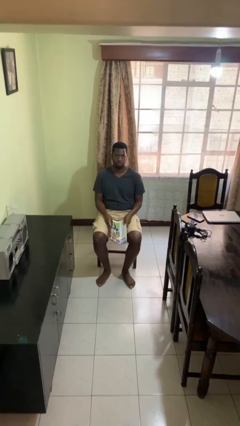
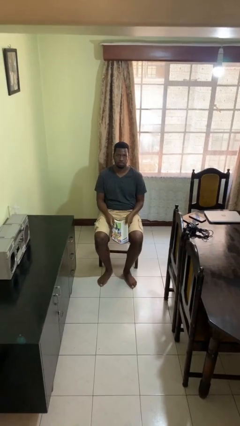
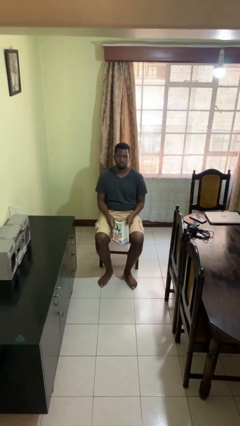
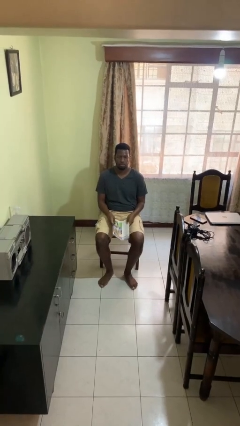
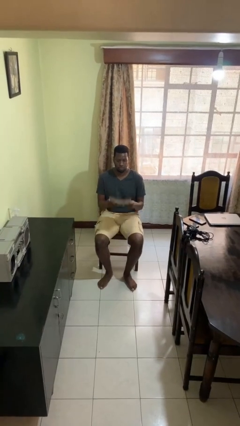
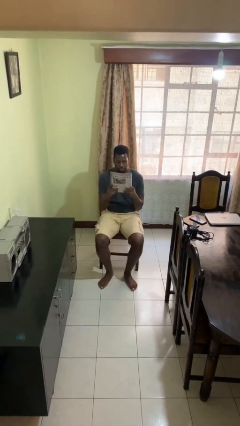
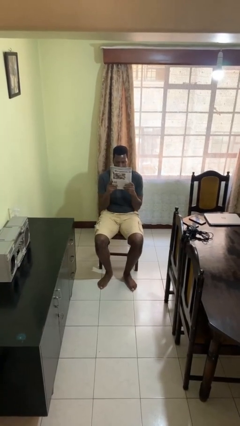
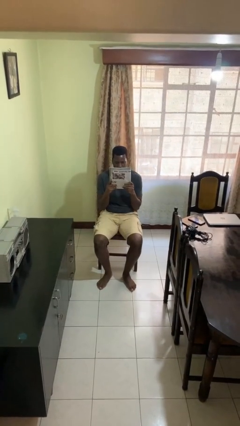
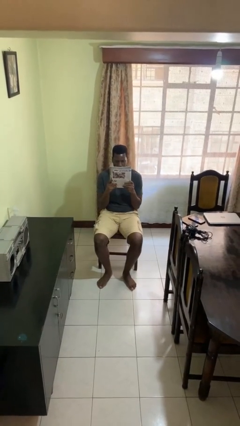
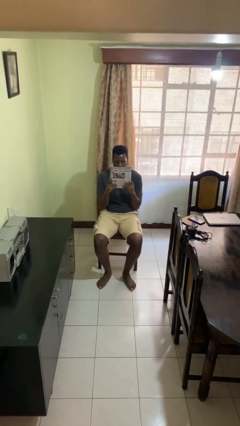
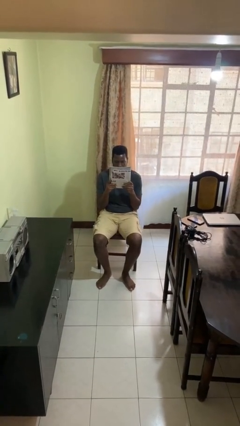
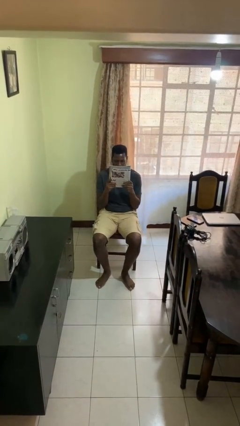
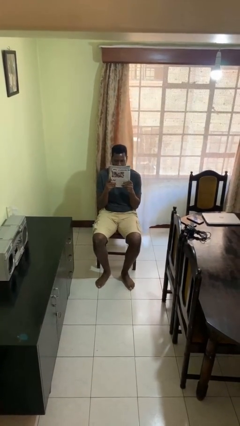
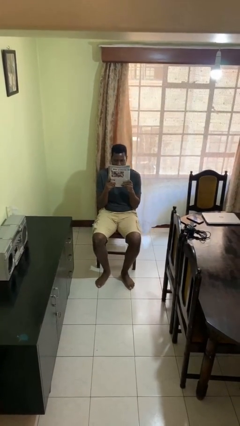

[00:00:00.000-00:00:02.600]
person reads document

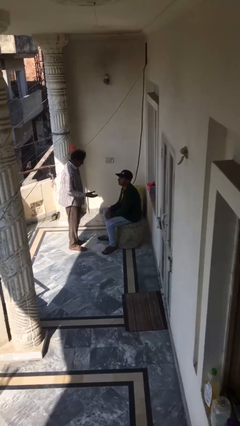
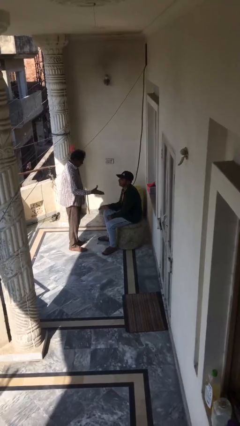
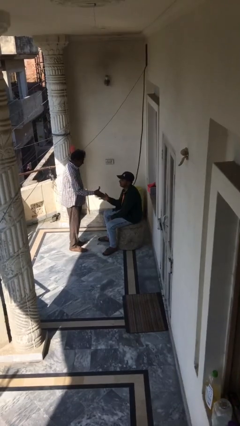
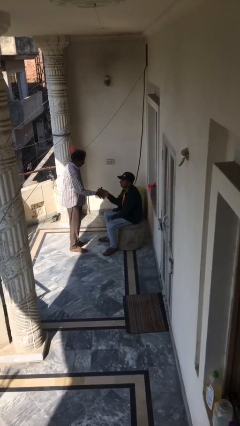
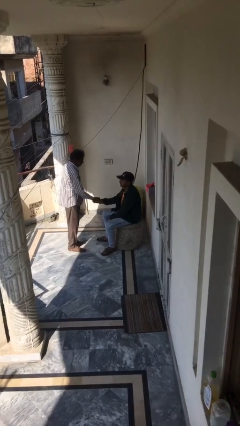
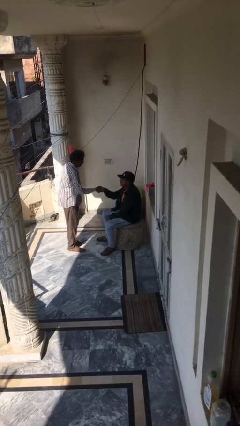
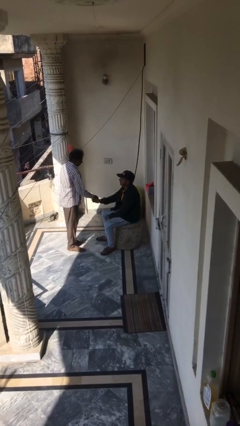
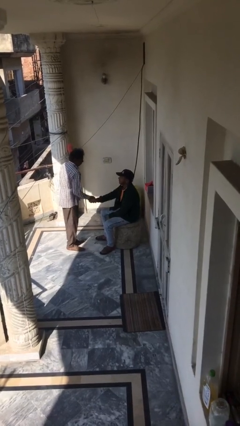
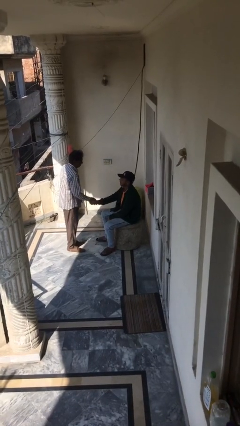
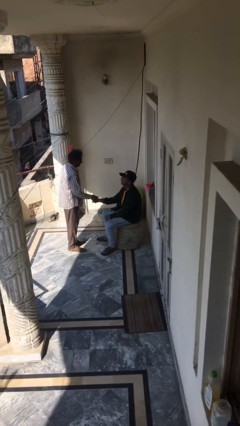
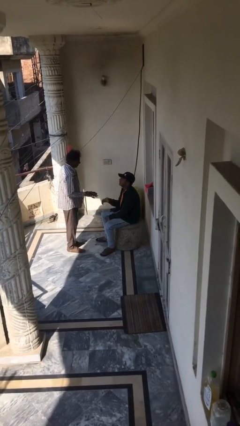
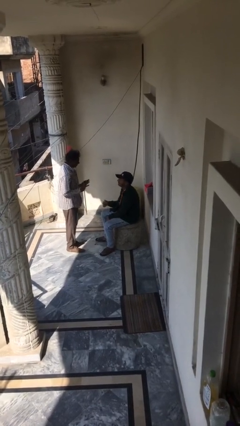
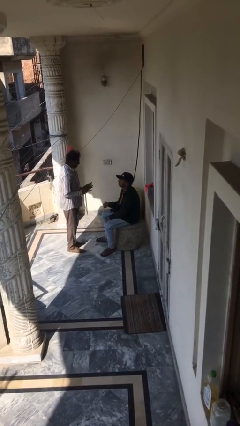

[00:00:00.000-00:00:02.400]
person shakes hand

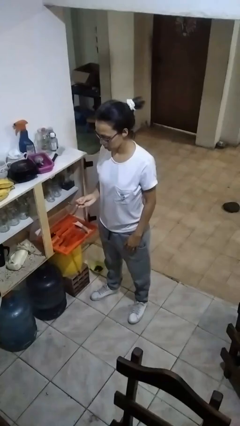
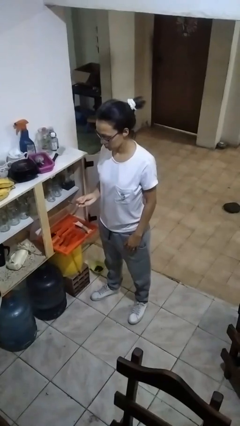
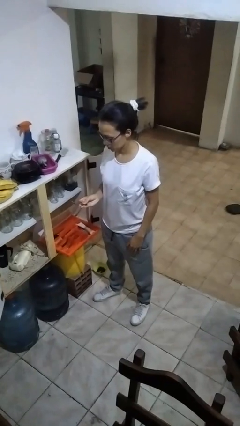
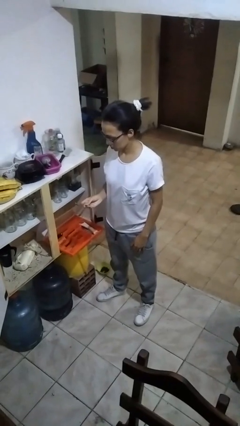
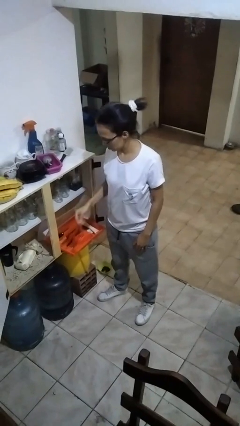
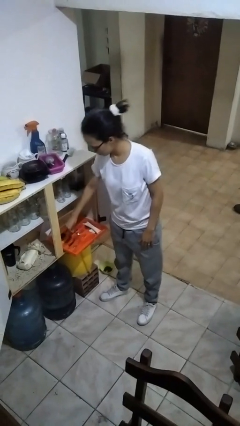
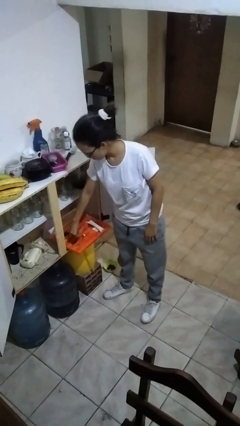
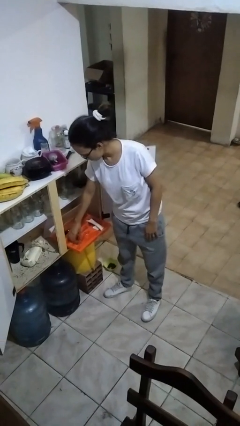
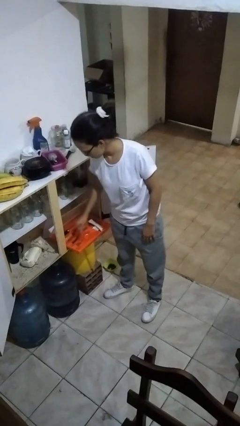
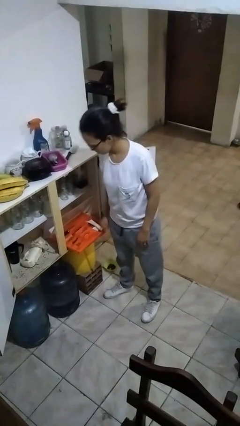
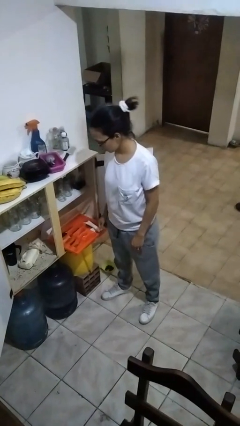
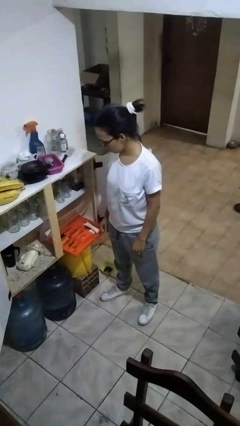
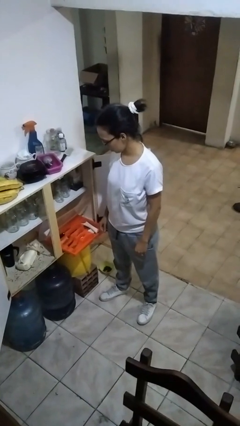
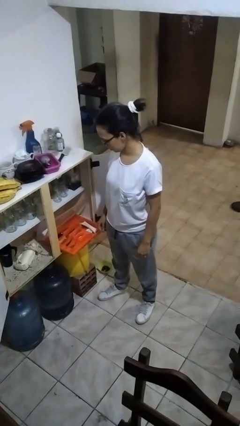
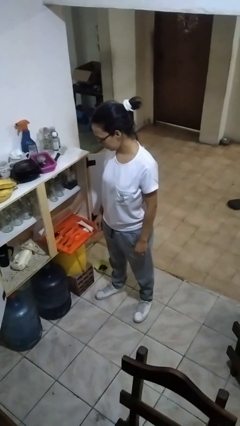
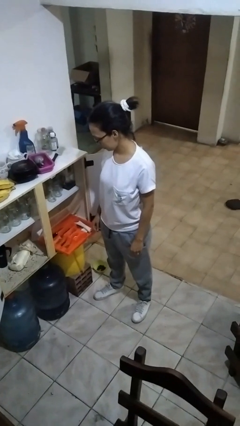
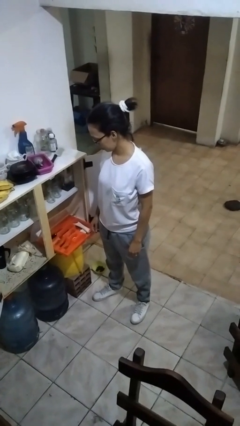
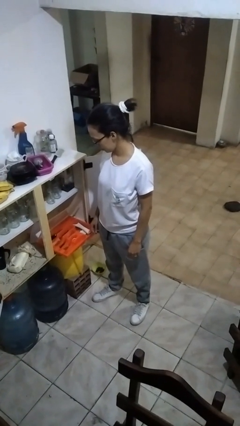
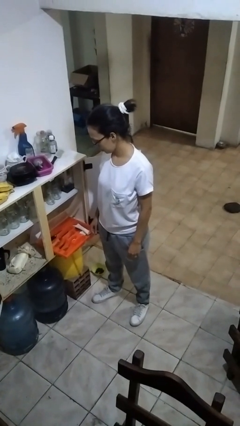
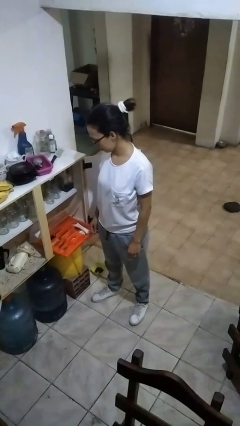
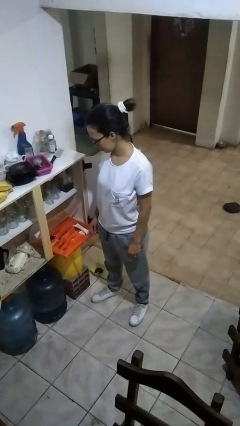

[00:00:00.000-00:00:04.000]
person puts object into kitchen drawer

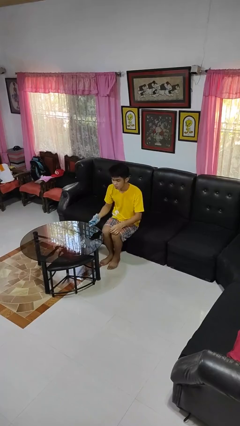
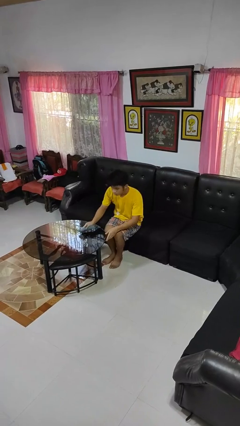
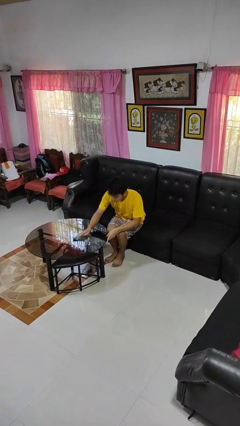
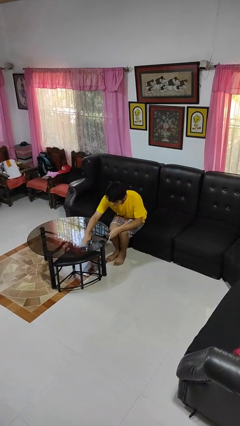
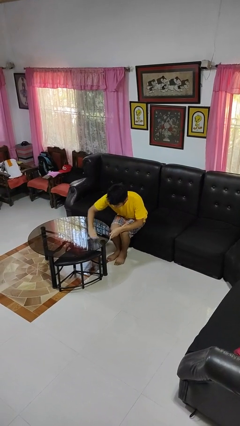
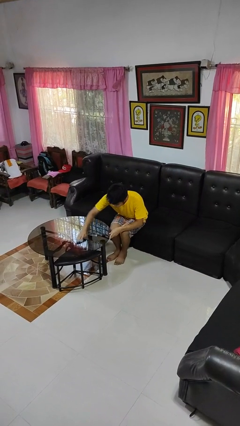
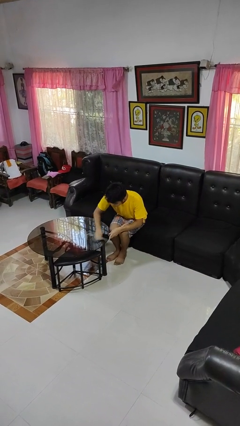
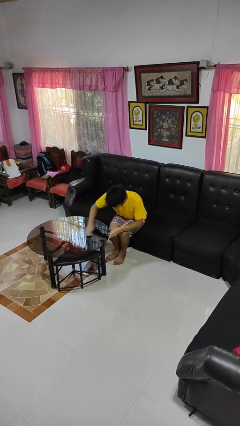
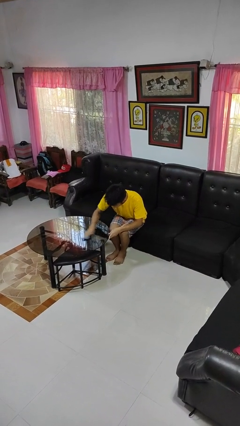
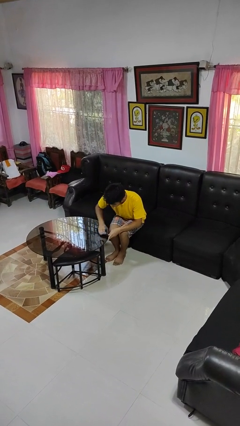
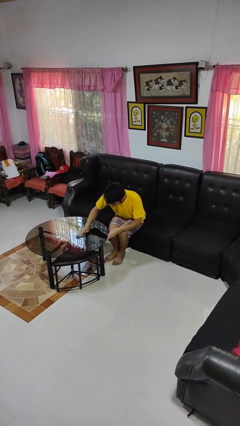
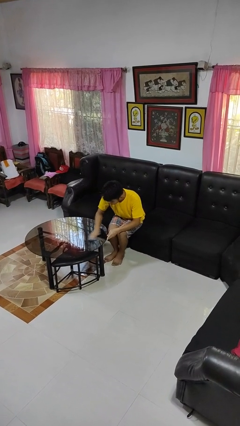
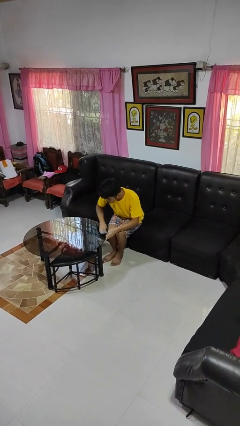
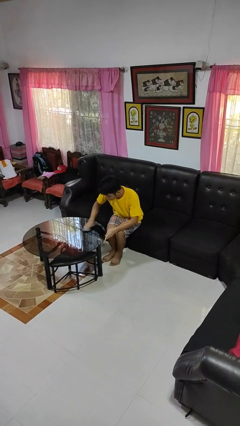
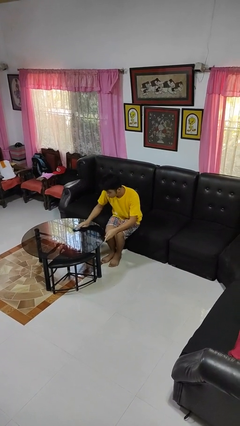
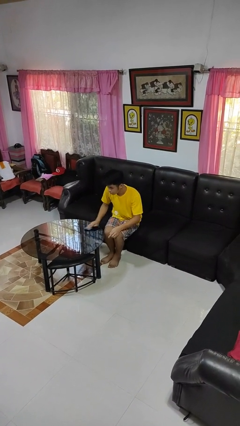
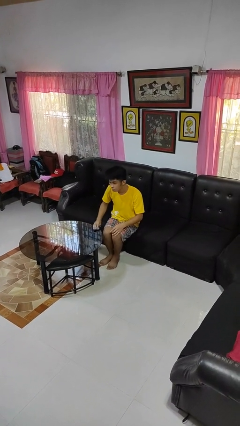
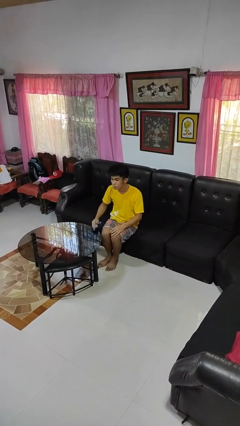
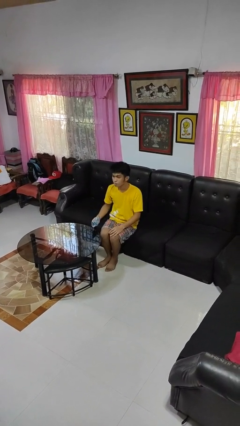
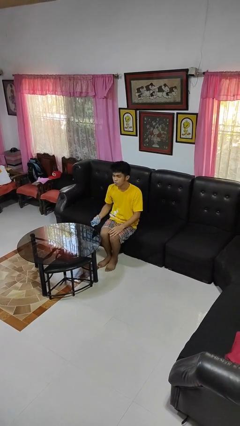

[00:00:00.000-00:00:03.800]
person cleans table with rag

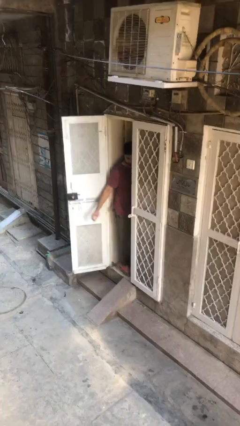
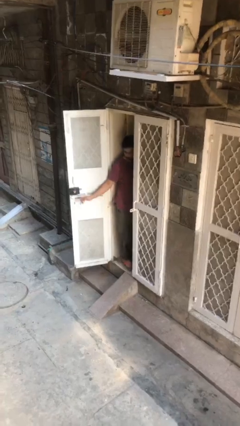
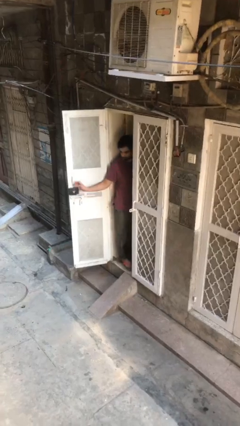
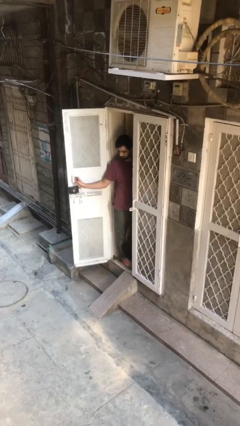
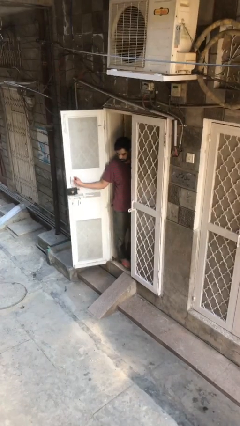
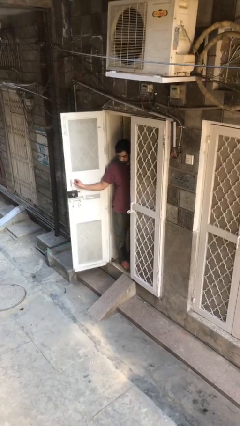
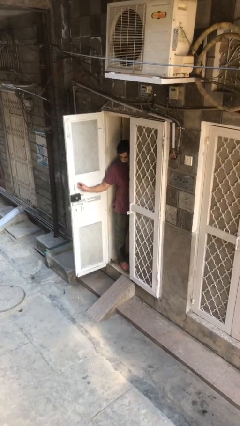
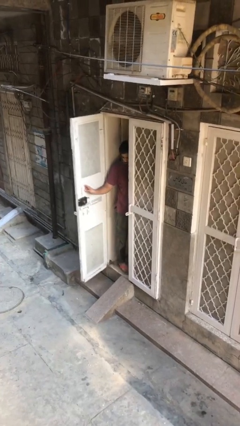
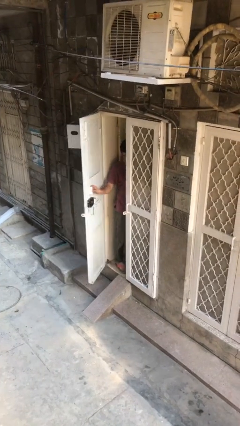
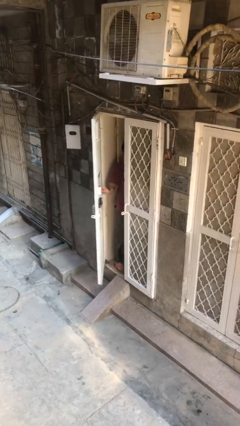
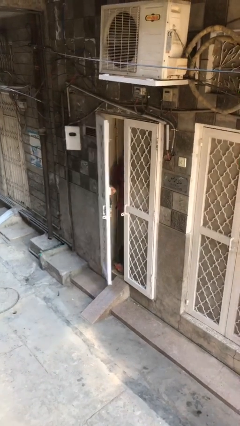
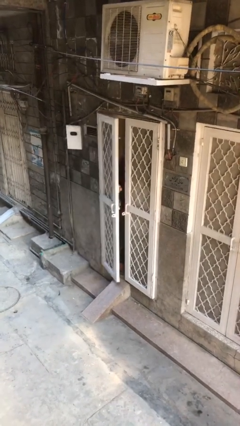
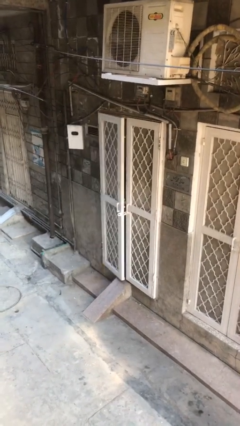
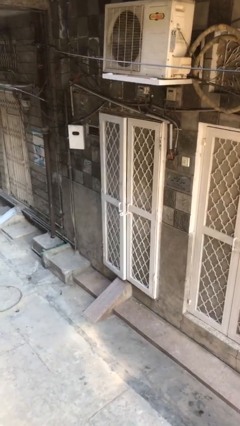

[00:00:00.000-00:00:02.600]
person closes facility door

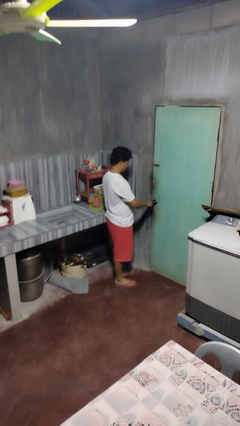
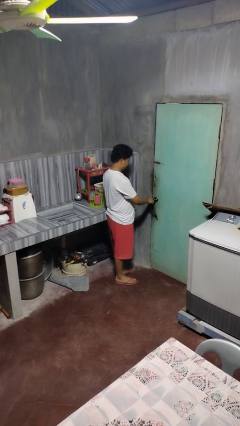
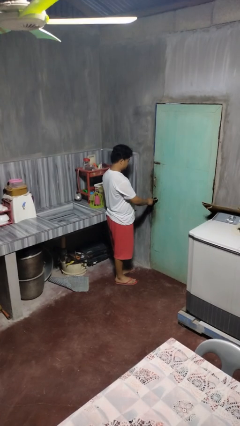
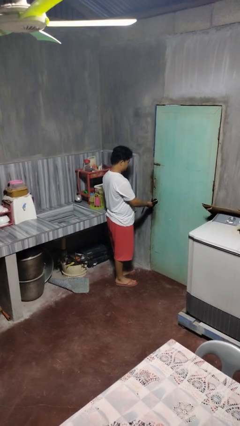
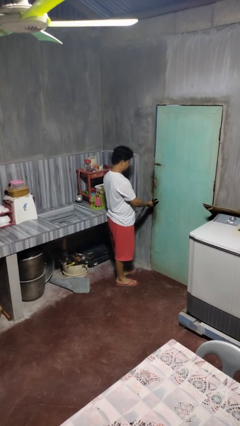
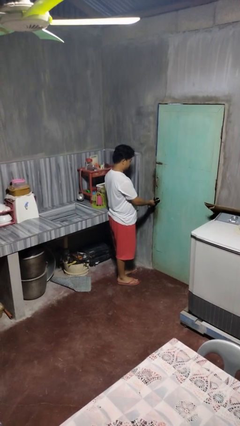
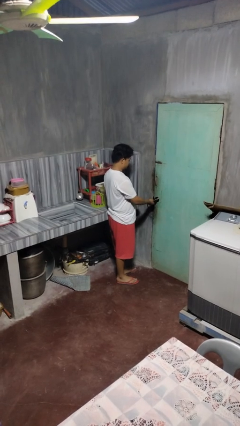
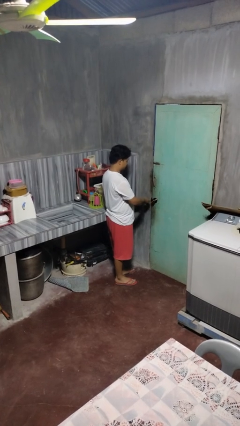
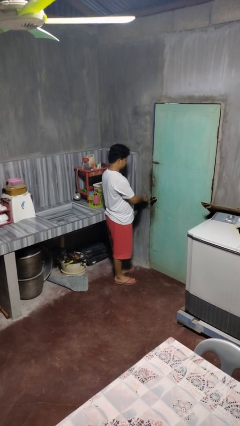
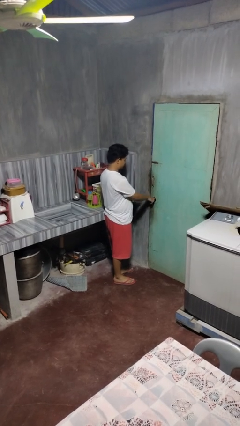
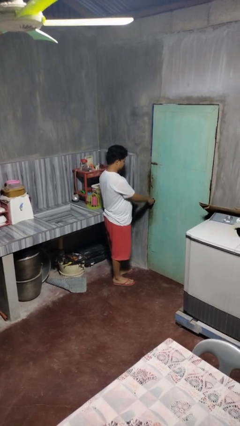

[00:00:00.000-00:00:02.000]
person unlocks door with keys
